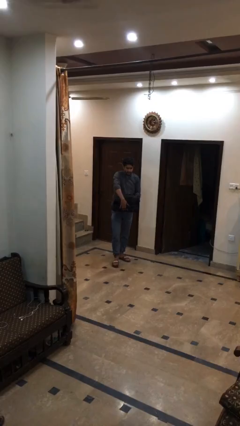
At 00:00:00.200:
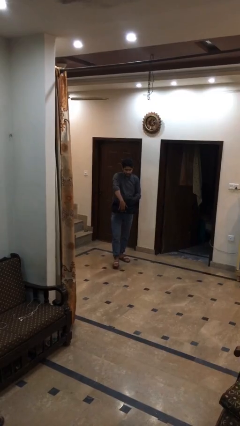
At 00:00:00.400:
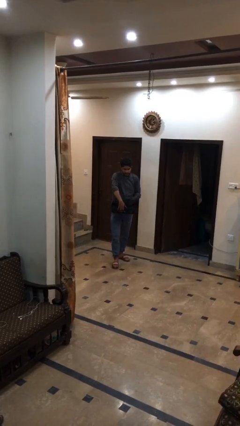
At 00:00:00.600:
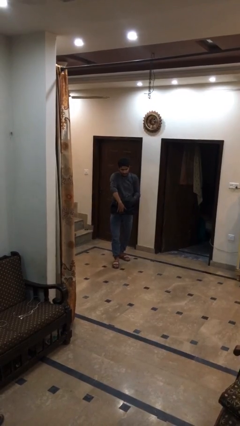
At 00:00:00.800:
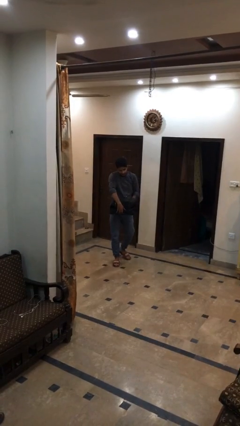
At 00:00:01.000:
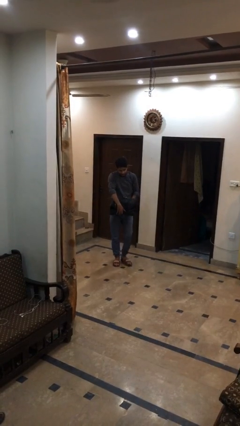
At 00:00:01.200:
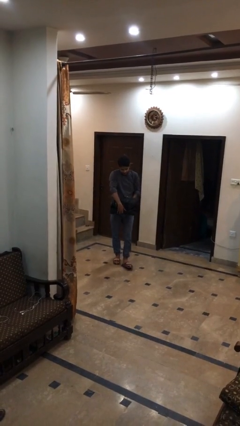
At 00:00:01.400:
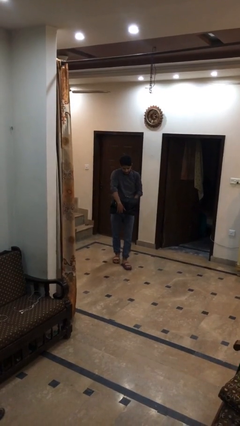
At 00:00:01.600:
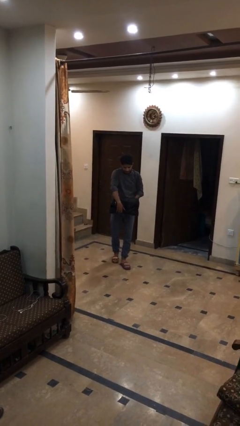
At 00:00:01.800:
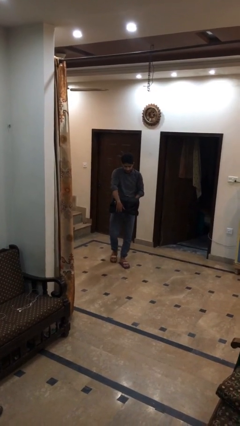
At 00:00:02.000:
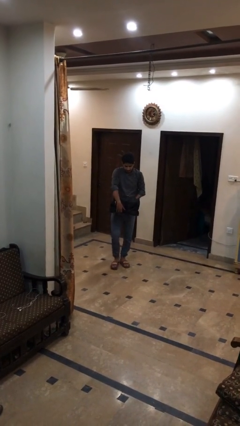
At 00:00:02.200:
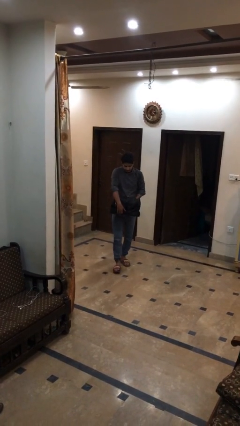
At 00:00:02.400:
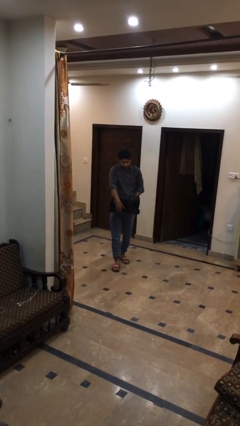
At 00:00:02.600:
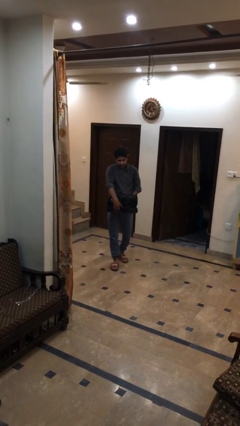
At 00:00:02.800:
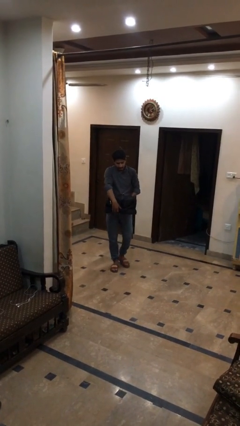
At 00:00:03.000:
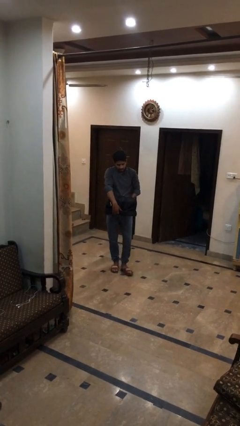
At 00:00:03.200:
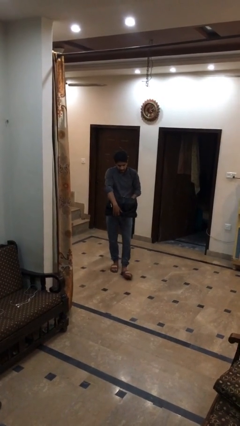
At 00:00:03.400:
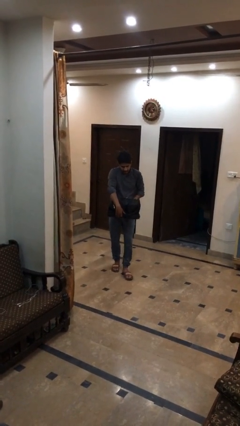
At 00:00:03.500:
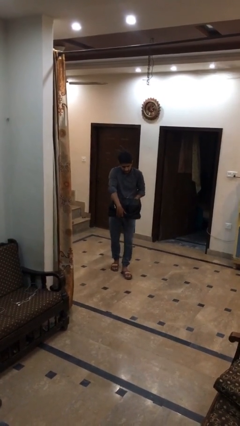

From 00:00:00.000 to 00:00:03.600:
person carries heavy object

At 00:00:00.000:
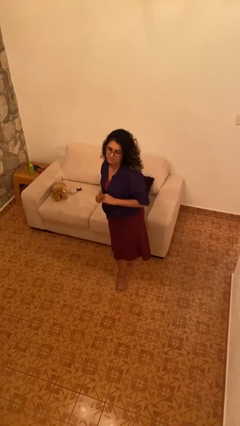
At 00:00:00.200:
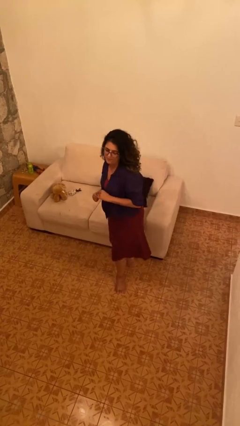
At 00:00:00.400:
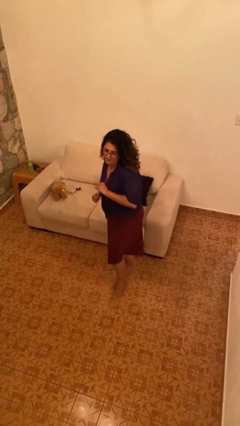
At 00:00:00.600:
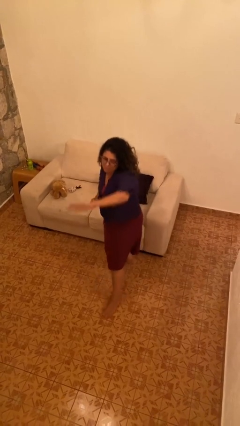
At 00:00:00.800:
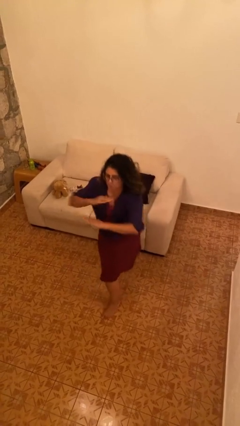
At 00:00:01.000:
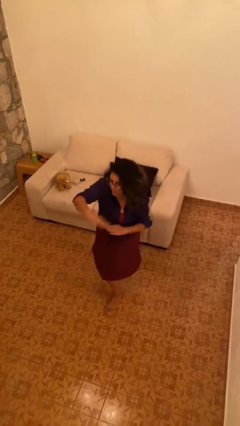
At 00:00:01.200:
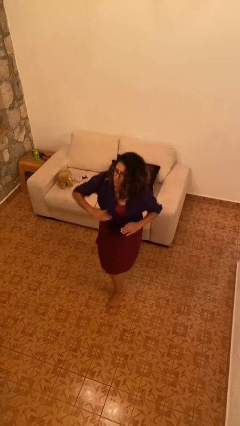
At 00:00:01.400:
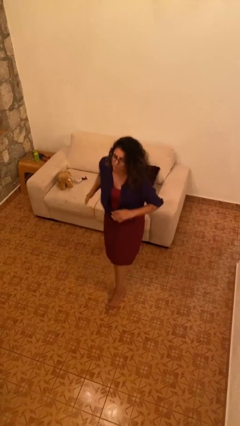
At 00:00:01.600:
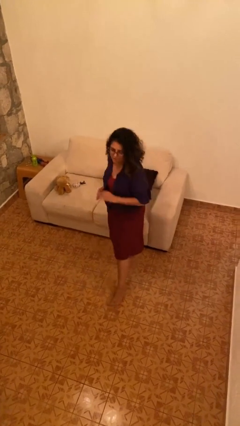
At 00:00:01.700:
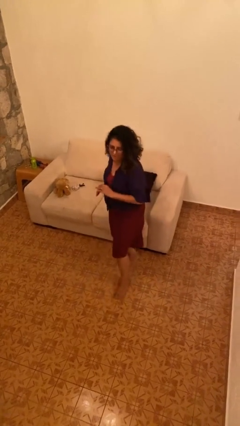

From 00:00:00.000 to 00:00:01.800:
person karate chop

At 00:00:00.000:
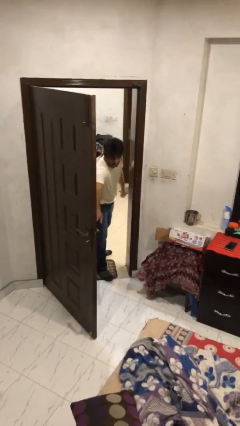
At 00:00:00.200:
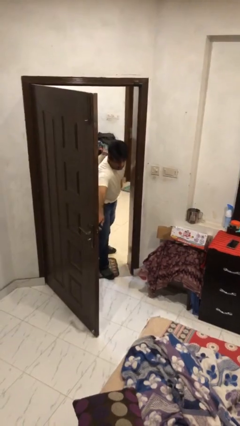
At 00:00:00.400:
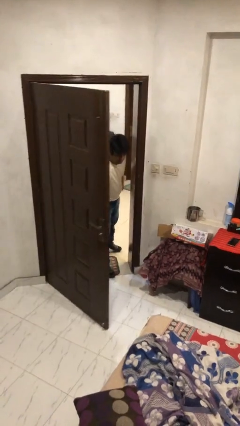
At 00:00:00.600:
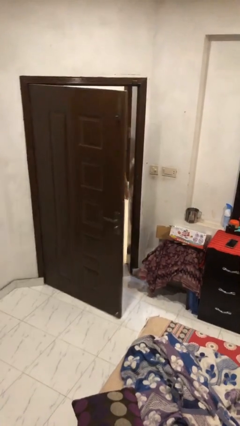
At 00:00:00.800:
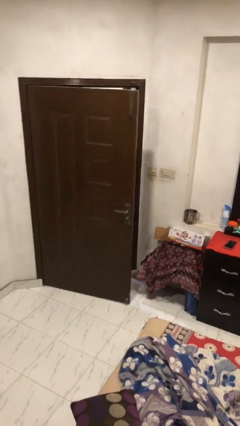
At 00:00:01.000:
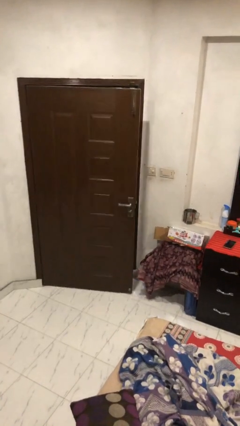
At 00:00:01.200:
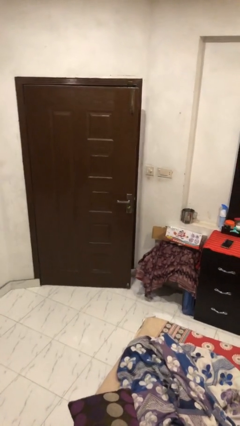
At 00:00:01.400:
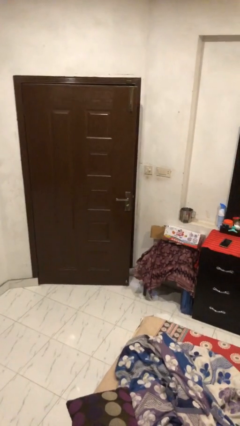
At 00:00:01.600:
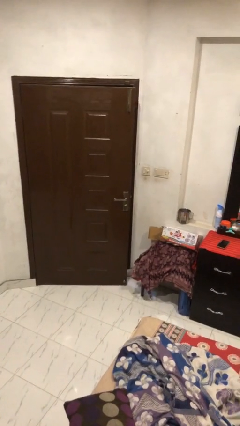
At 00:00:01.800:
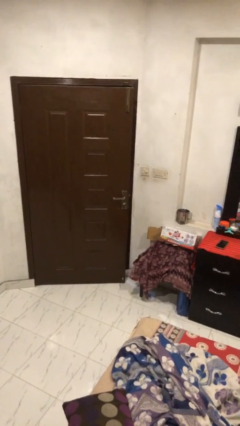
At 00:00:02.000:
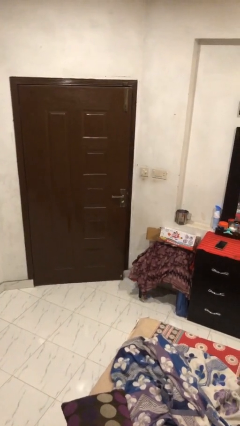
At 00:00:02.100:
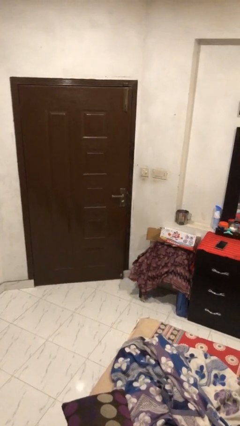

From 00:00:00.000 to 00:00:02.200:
person closes facility door

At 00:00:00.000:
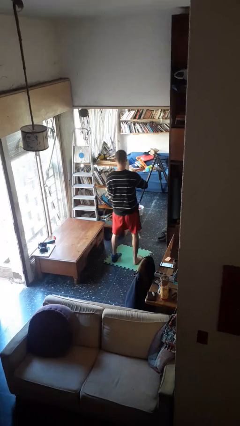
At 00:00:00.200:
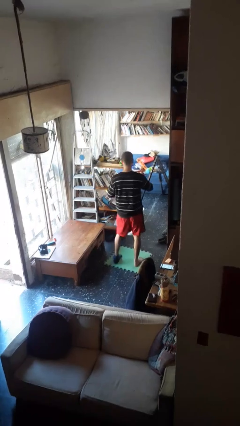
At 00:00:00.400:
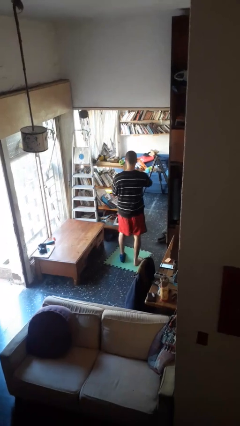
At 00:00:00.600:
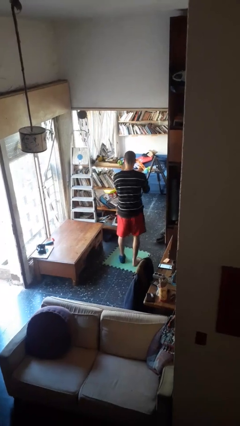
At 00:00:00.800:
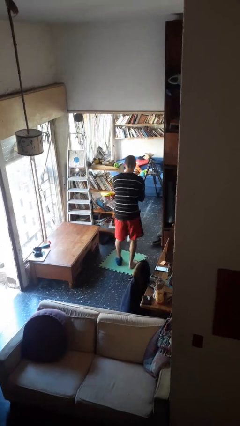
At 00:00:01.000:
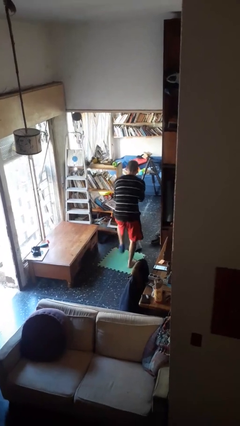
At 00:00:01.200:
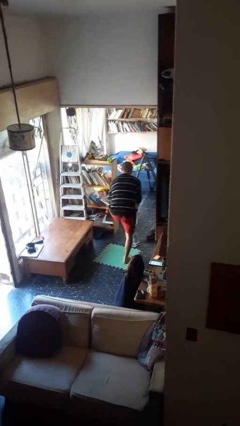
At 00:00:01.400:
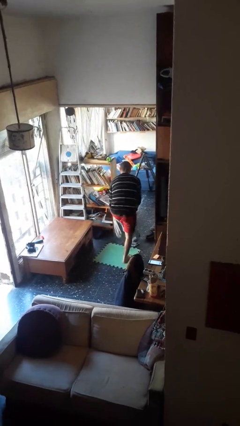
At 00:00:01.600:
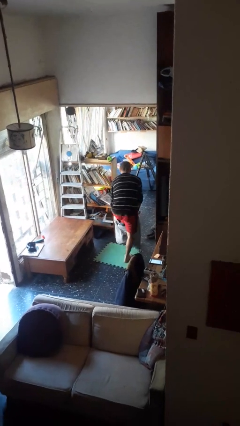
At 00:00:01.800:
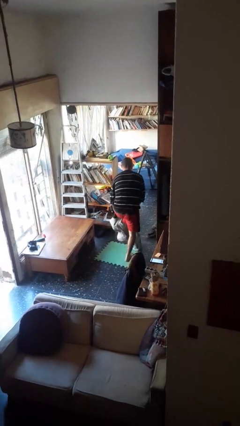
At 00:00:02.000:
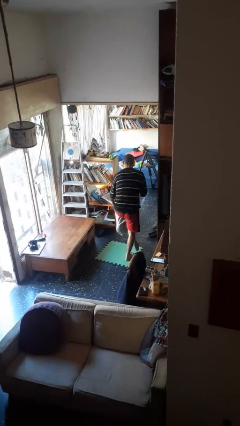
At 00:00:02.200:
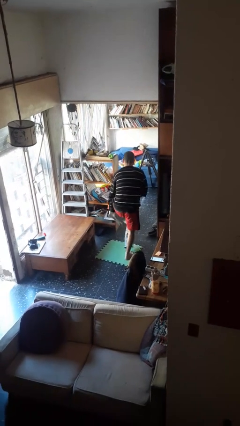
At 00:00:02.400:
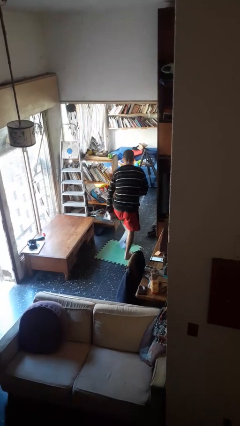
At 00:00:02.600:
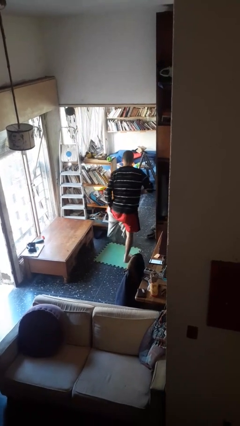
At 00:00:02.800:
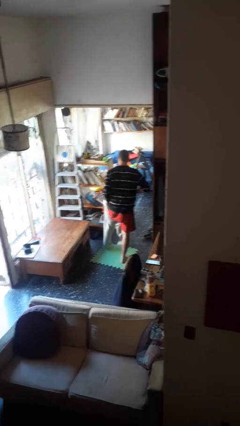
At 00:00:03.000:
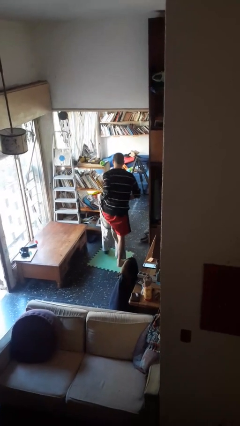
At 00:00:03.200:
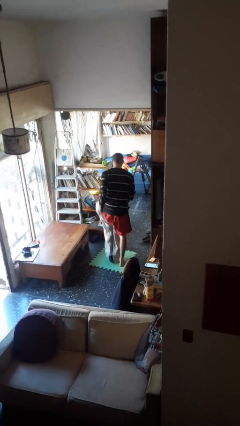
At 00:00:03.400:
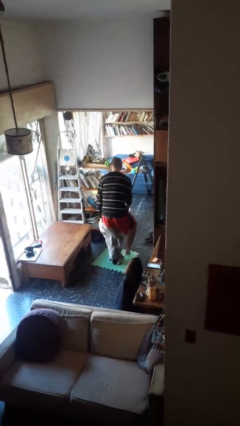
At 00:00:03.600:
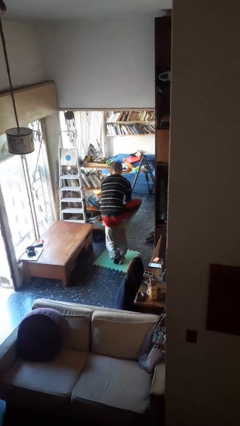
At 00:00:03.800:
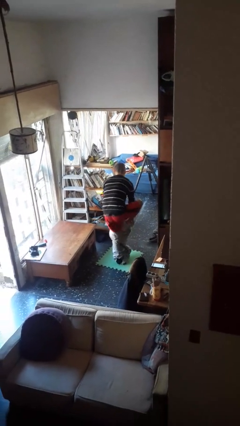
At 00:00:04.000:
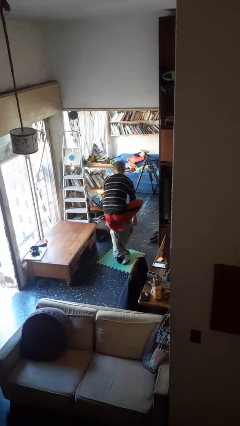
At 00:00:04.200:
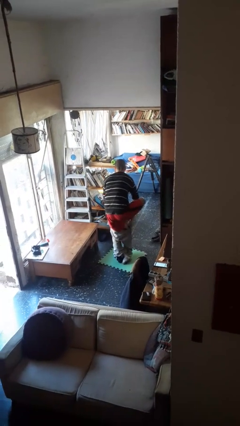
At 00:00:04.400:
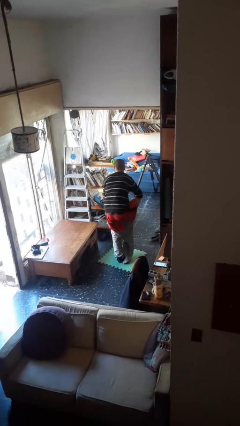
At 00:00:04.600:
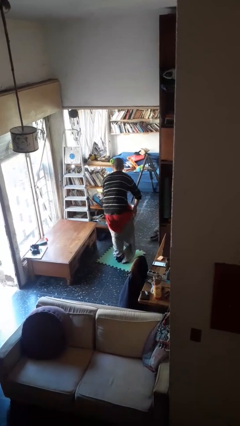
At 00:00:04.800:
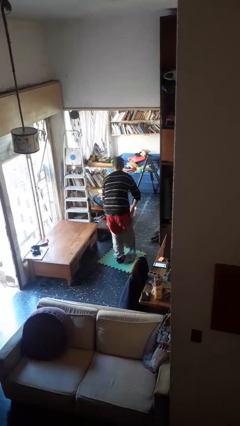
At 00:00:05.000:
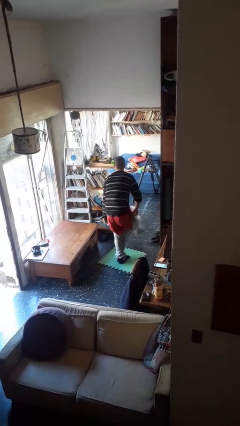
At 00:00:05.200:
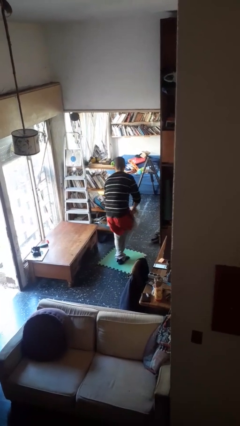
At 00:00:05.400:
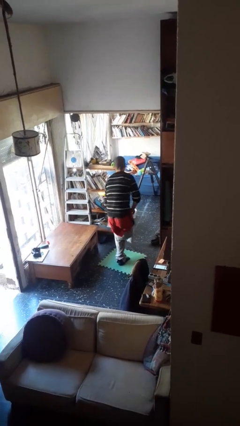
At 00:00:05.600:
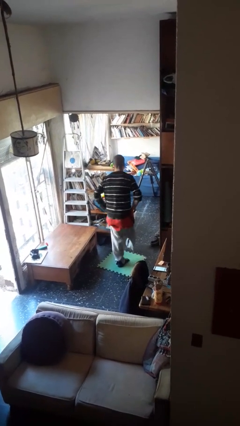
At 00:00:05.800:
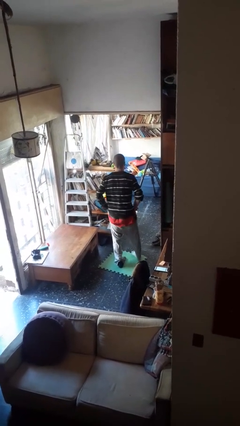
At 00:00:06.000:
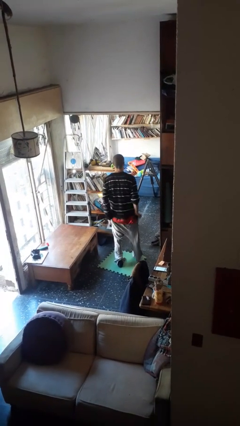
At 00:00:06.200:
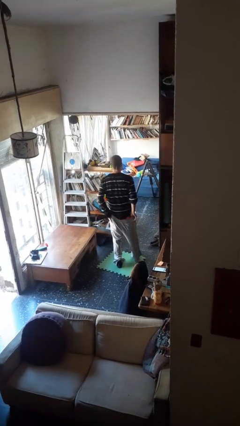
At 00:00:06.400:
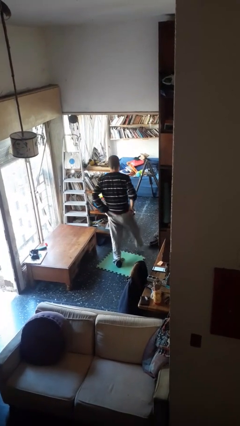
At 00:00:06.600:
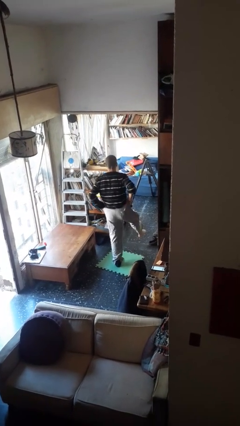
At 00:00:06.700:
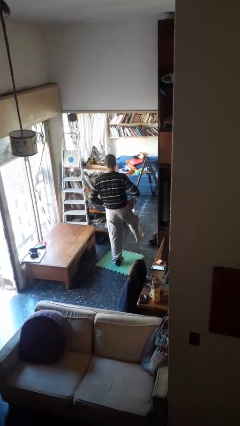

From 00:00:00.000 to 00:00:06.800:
person puts on pants

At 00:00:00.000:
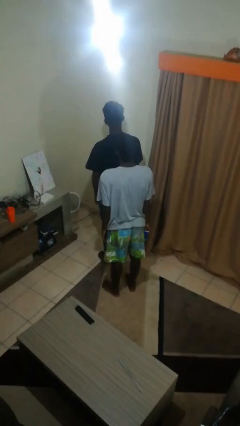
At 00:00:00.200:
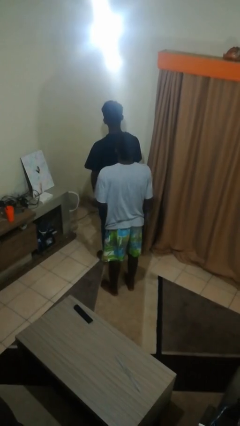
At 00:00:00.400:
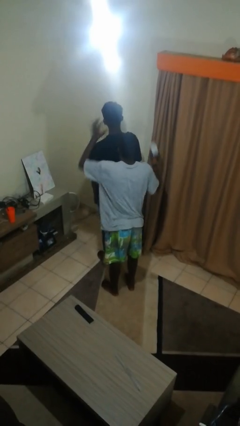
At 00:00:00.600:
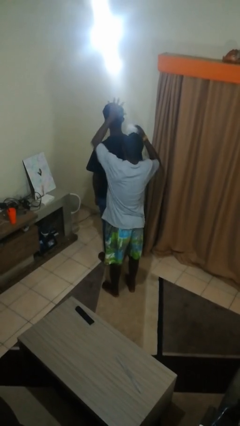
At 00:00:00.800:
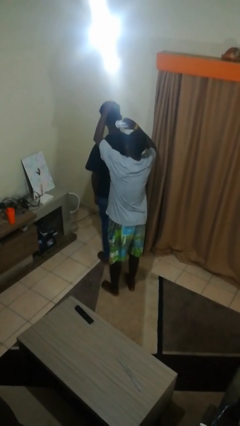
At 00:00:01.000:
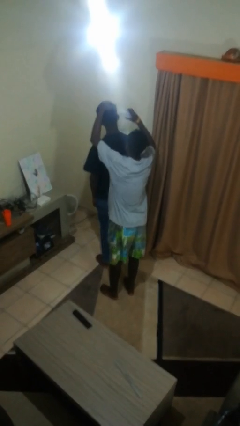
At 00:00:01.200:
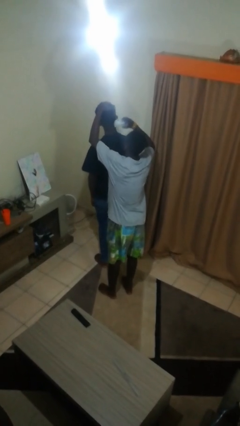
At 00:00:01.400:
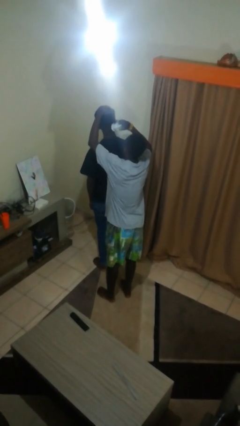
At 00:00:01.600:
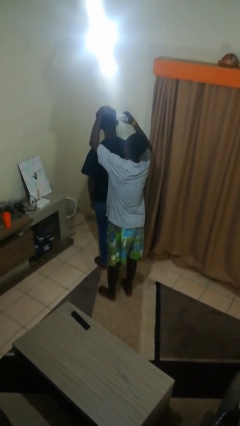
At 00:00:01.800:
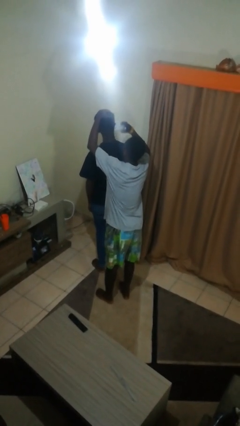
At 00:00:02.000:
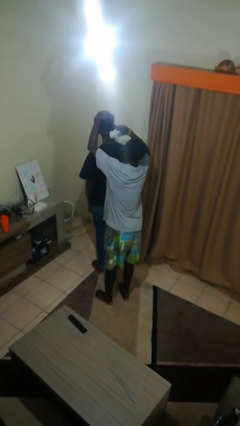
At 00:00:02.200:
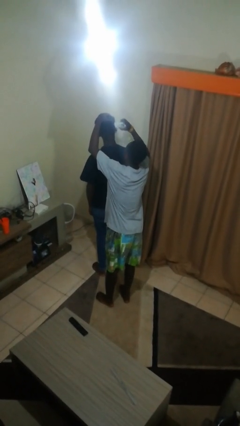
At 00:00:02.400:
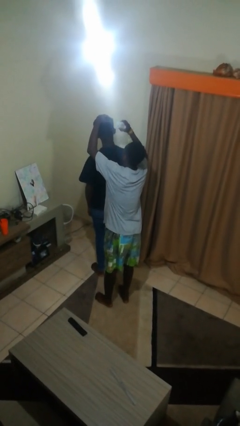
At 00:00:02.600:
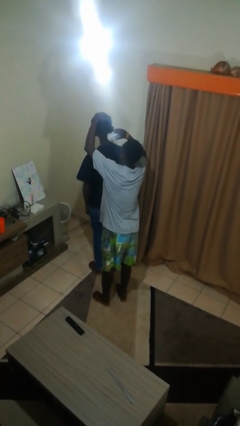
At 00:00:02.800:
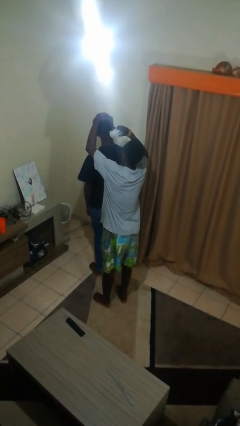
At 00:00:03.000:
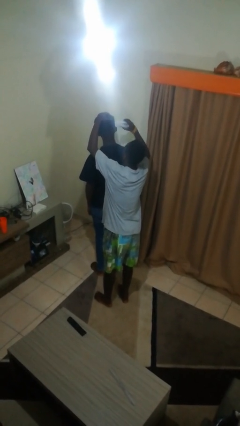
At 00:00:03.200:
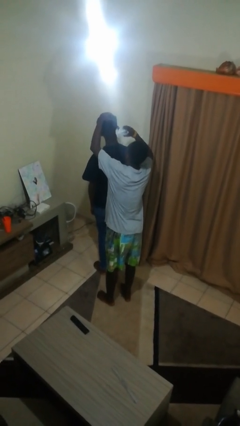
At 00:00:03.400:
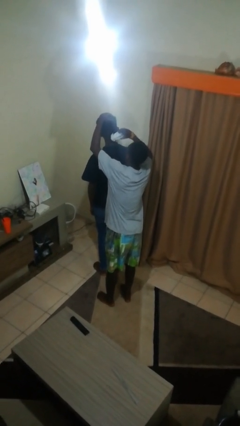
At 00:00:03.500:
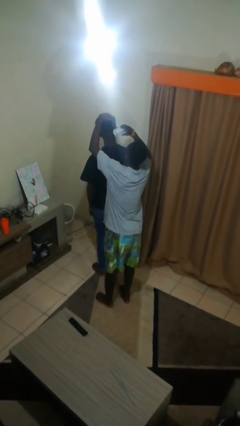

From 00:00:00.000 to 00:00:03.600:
person brushes hair of person
